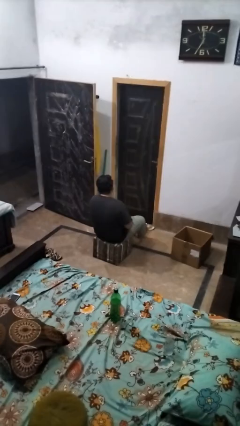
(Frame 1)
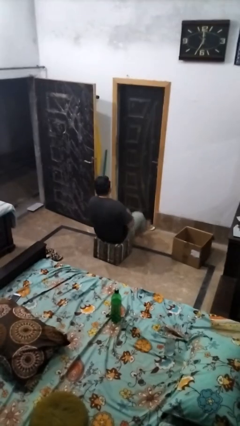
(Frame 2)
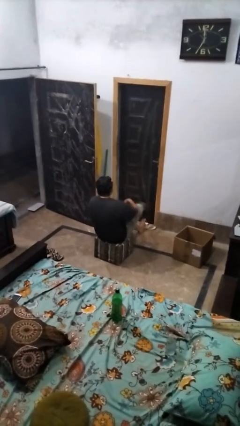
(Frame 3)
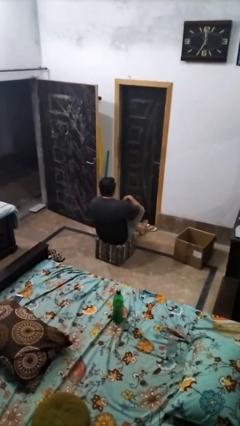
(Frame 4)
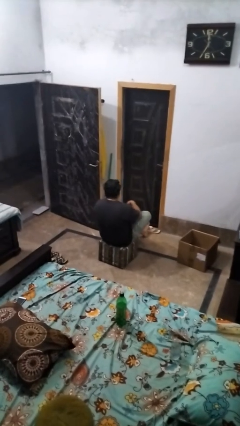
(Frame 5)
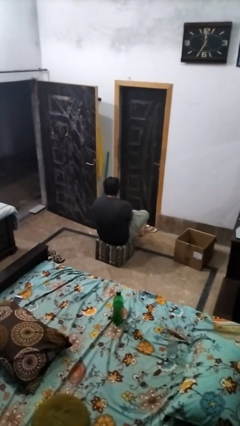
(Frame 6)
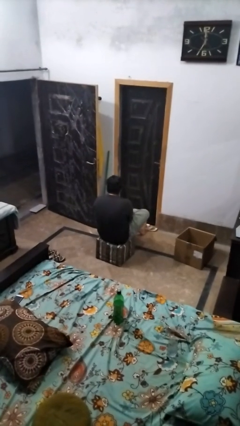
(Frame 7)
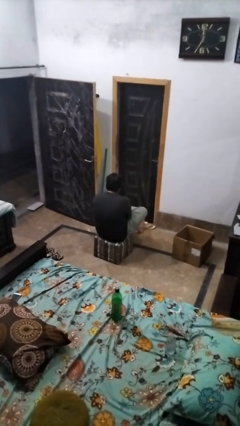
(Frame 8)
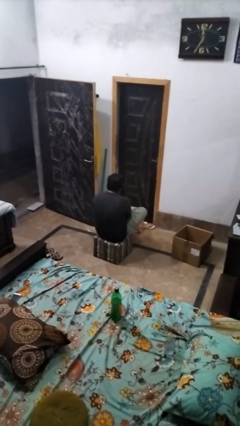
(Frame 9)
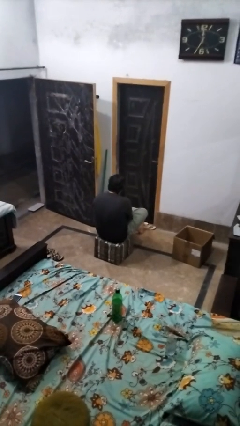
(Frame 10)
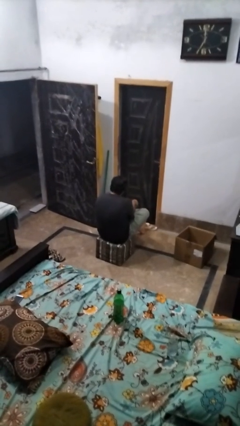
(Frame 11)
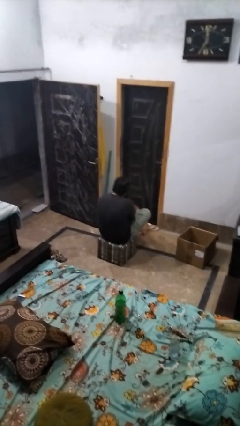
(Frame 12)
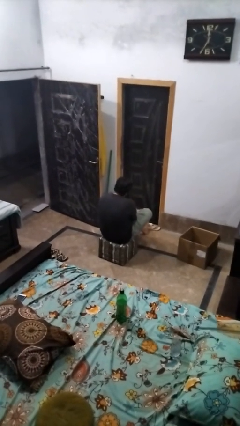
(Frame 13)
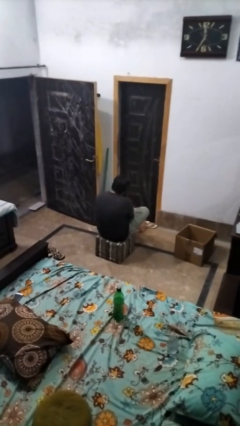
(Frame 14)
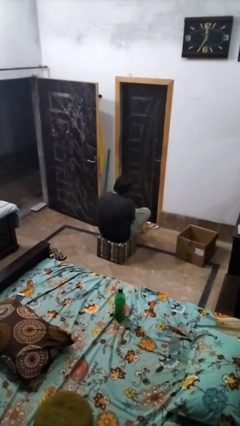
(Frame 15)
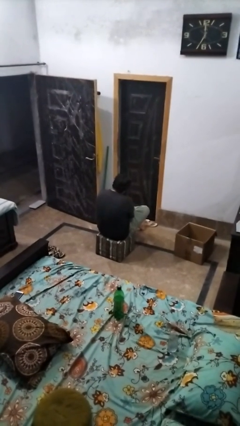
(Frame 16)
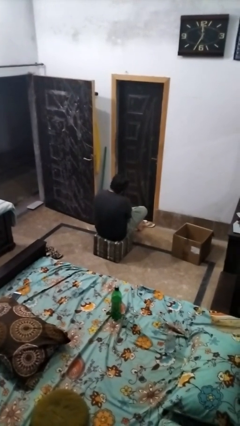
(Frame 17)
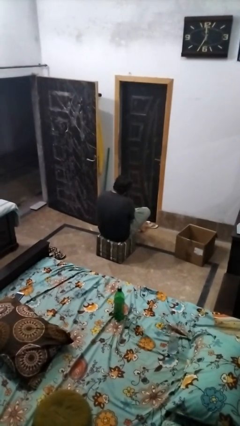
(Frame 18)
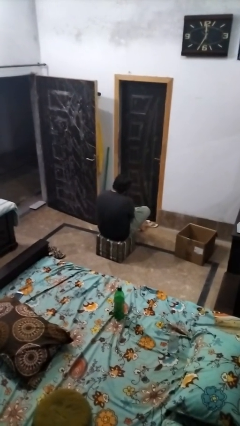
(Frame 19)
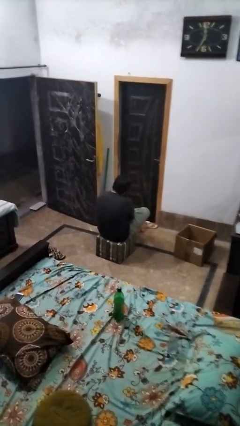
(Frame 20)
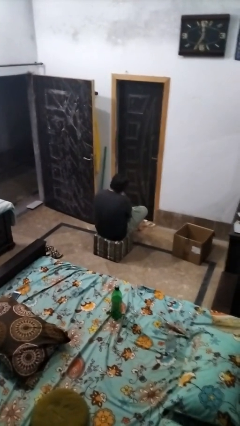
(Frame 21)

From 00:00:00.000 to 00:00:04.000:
person rubs foot

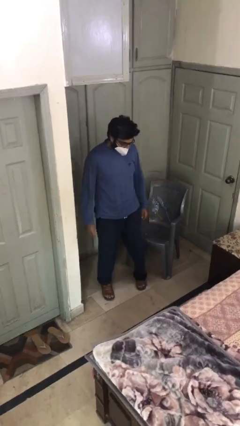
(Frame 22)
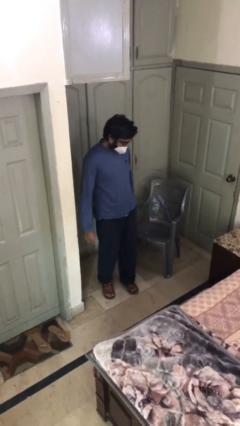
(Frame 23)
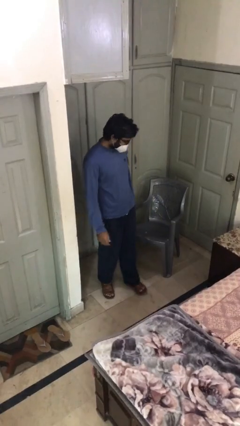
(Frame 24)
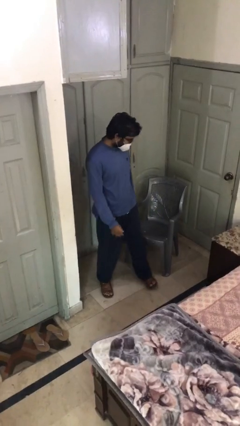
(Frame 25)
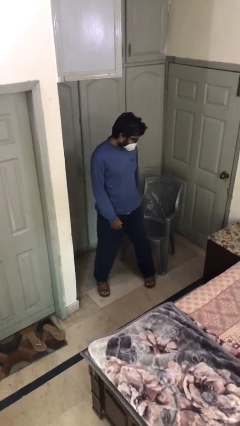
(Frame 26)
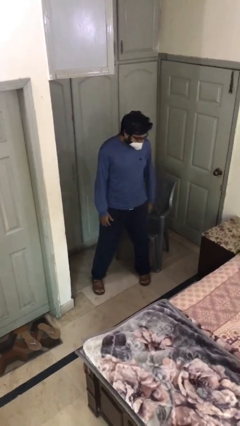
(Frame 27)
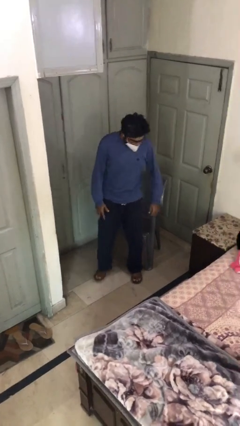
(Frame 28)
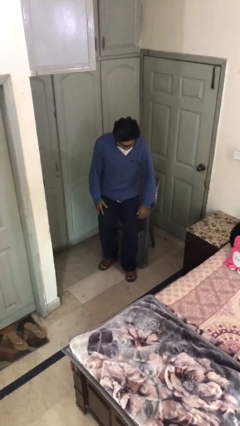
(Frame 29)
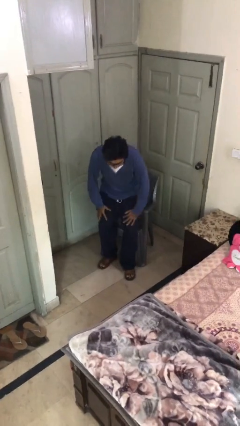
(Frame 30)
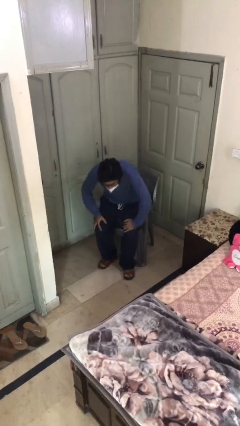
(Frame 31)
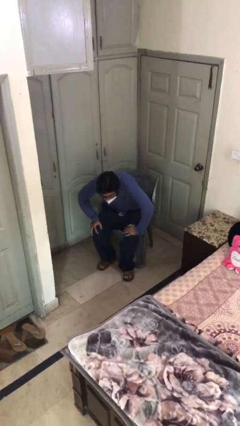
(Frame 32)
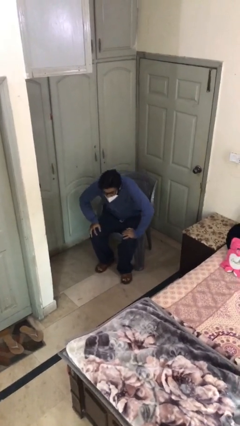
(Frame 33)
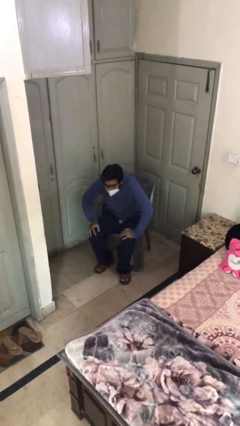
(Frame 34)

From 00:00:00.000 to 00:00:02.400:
person sits down

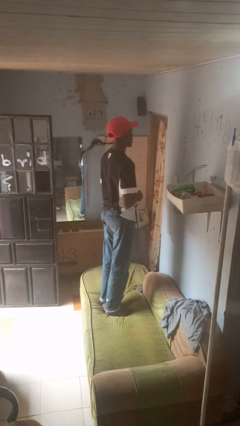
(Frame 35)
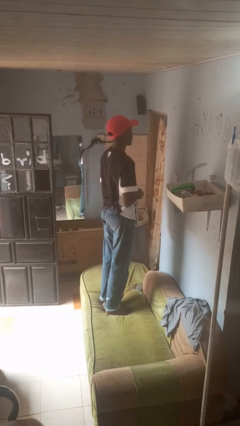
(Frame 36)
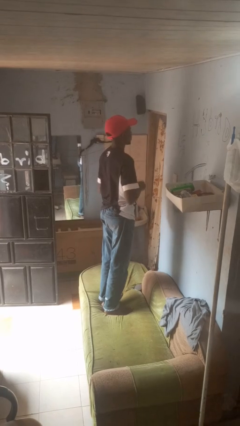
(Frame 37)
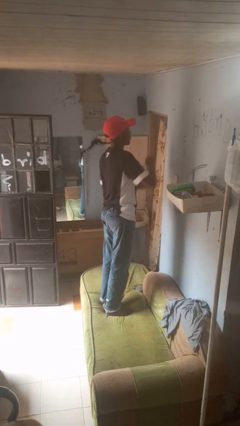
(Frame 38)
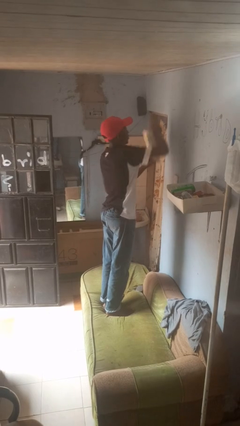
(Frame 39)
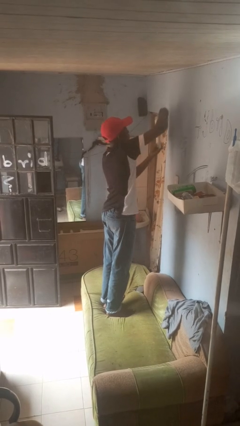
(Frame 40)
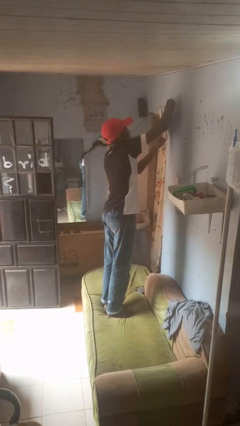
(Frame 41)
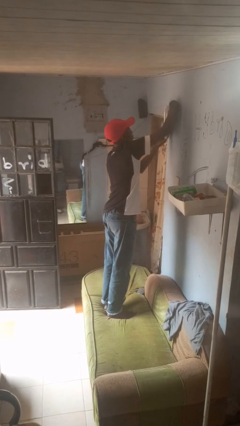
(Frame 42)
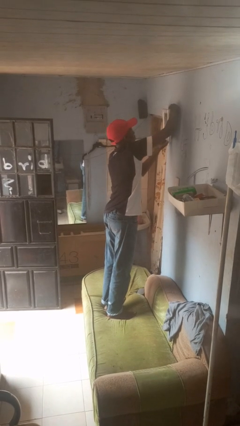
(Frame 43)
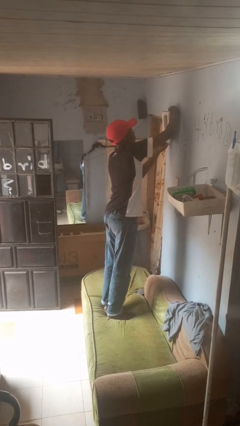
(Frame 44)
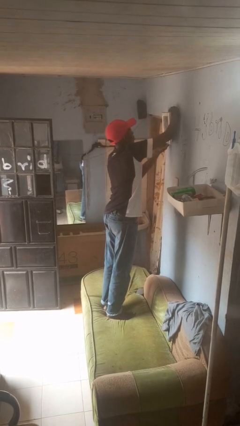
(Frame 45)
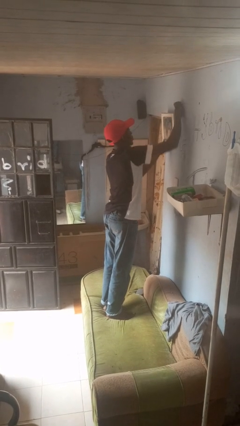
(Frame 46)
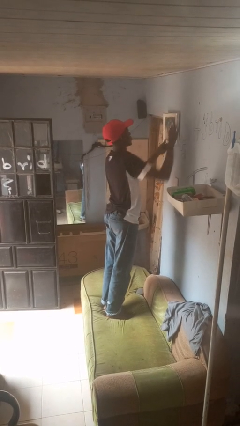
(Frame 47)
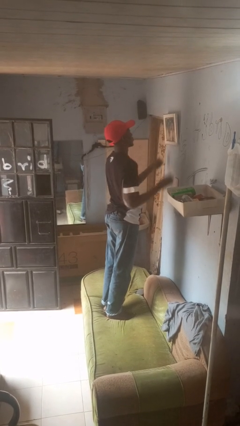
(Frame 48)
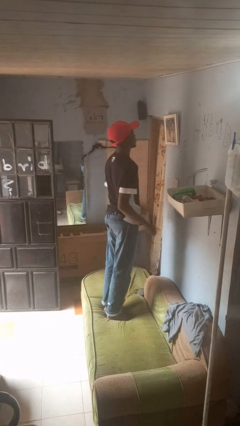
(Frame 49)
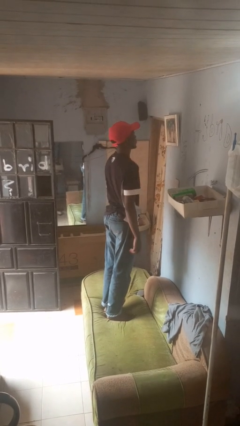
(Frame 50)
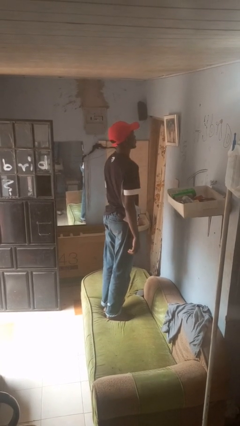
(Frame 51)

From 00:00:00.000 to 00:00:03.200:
person puts up picture frame

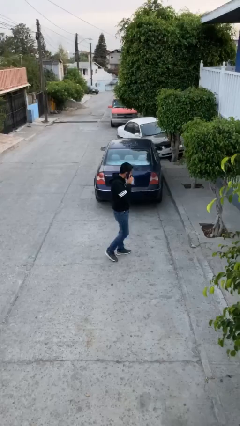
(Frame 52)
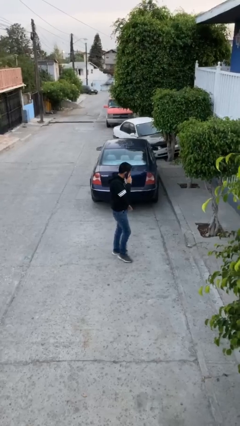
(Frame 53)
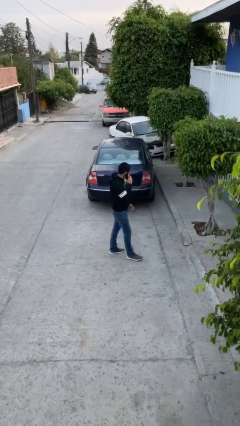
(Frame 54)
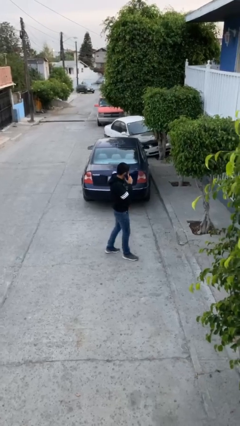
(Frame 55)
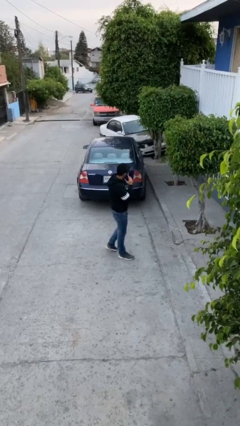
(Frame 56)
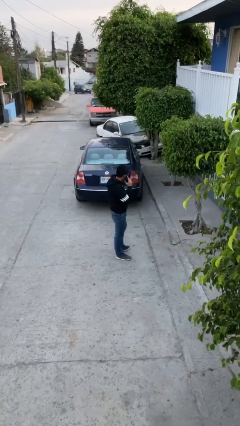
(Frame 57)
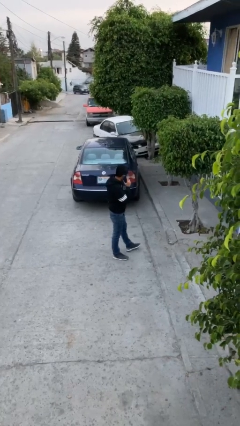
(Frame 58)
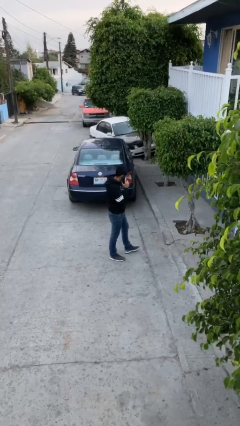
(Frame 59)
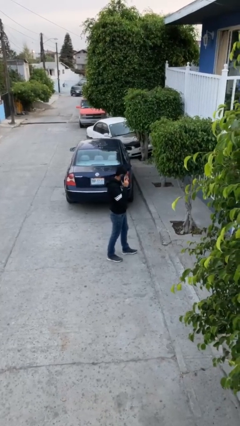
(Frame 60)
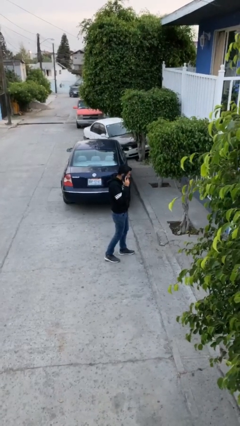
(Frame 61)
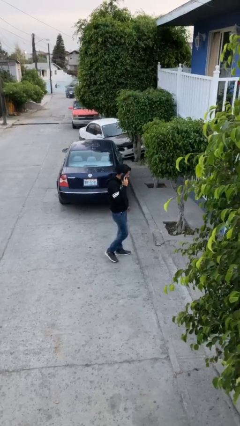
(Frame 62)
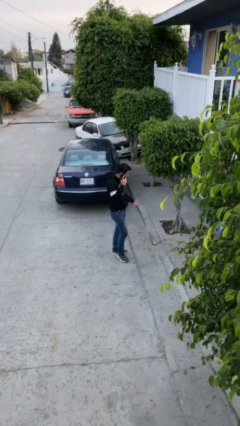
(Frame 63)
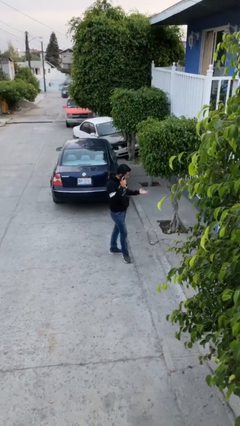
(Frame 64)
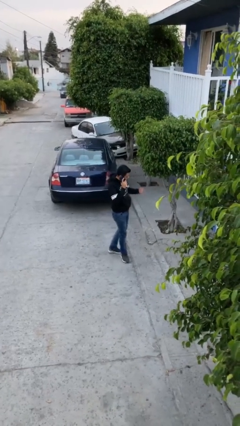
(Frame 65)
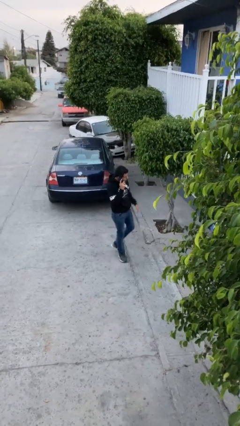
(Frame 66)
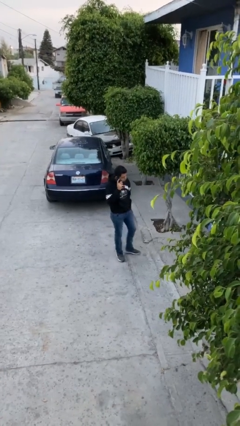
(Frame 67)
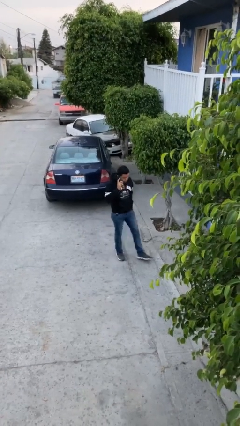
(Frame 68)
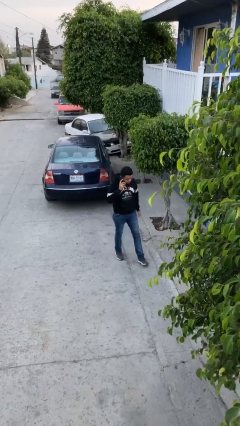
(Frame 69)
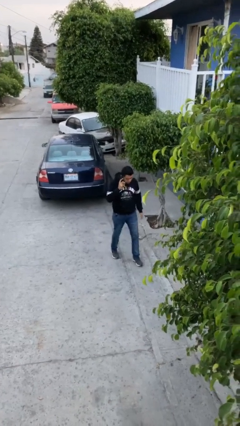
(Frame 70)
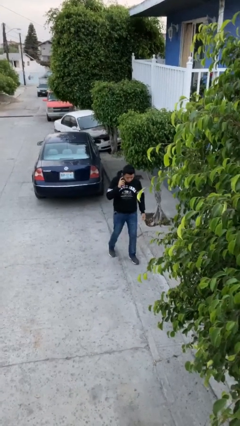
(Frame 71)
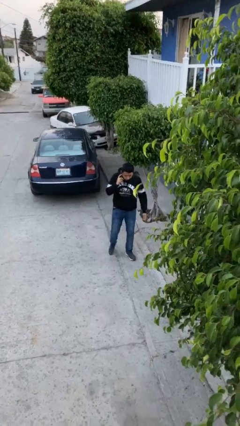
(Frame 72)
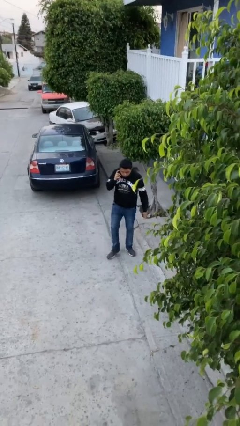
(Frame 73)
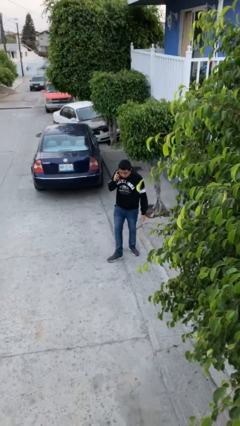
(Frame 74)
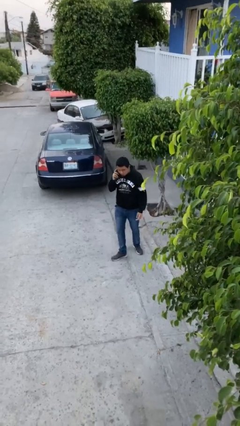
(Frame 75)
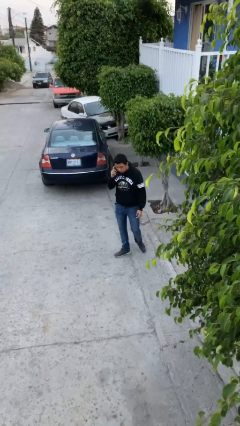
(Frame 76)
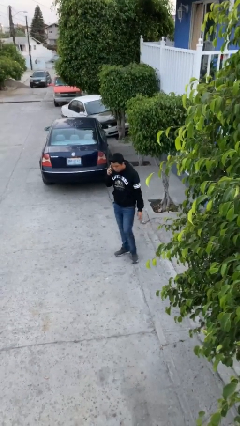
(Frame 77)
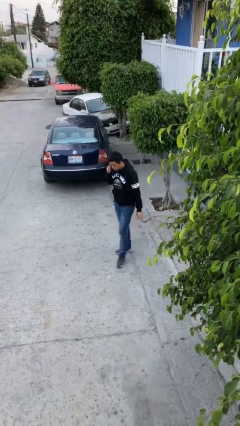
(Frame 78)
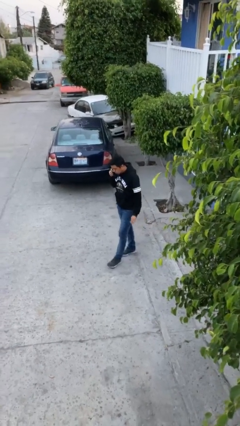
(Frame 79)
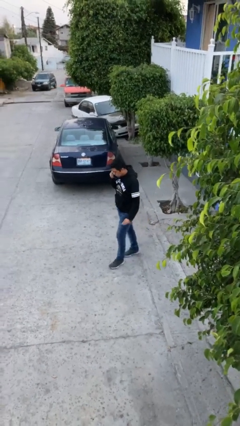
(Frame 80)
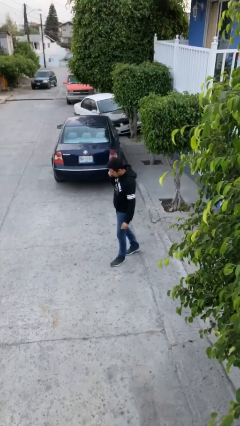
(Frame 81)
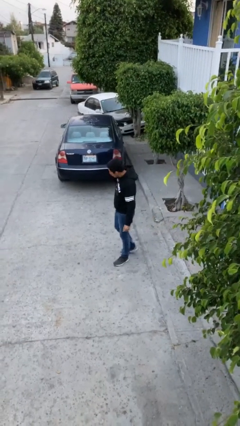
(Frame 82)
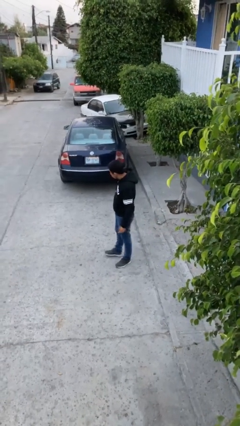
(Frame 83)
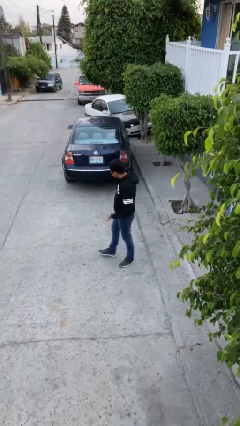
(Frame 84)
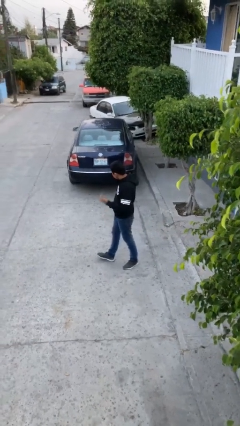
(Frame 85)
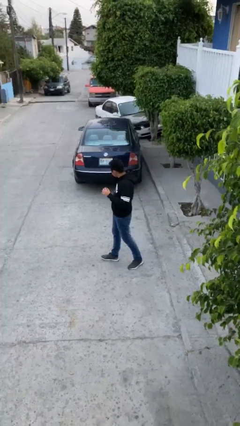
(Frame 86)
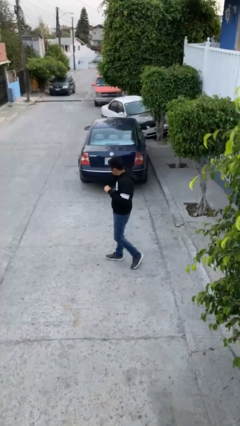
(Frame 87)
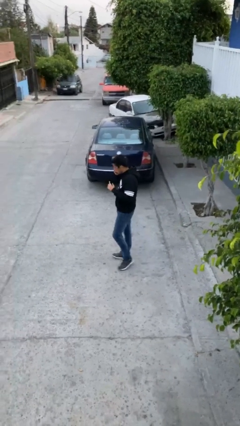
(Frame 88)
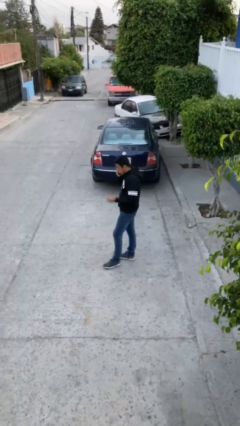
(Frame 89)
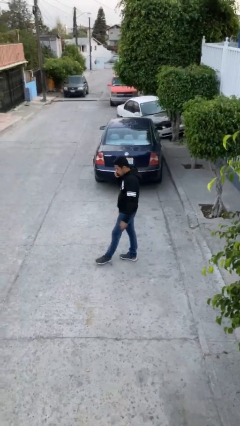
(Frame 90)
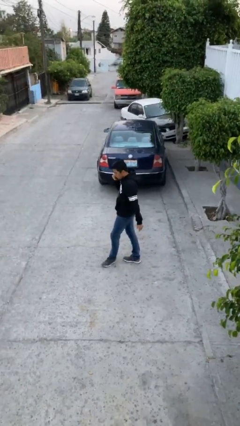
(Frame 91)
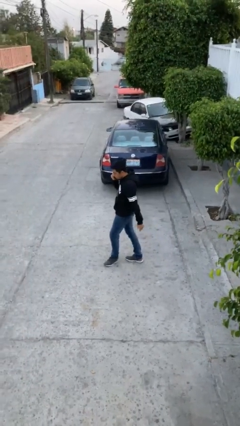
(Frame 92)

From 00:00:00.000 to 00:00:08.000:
person talks on phone

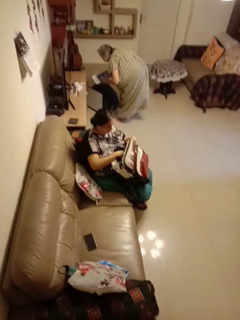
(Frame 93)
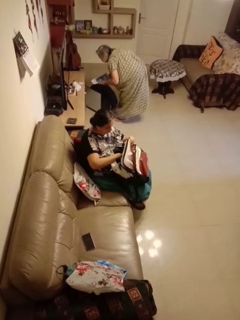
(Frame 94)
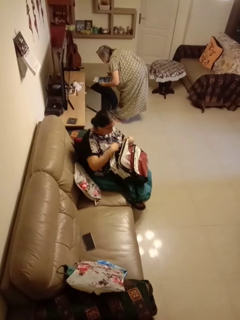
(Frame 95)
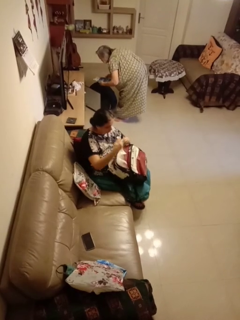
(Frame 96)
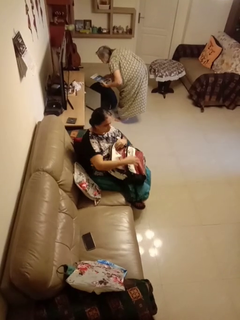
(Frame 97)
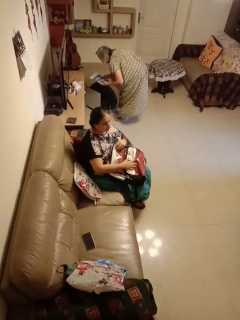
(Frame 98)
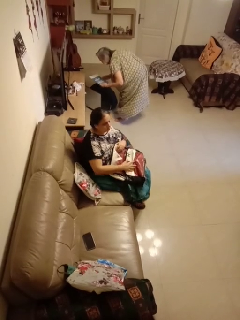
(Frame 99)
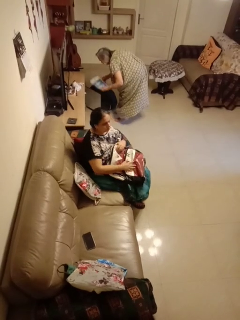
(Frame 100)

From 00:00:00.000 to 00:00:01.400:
person puts object into backpack
